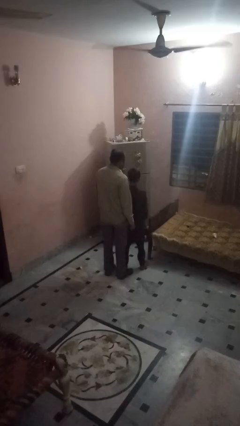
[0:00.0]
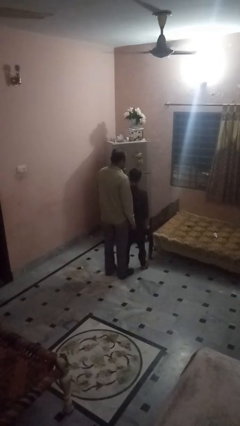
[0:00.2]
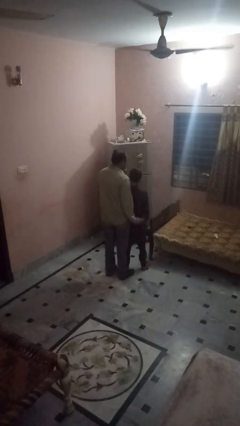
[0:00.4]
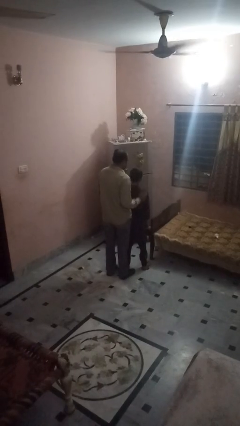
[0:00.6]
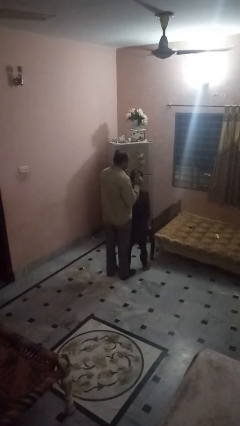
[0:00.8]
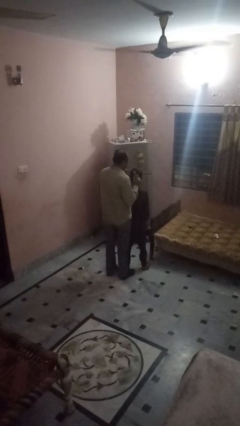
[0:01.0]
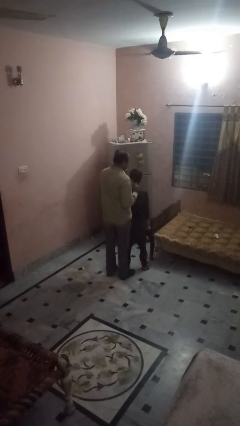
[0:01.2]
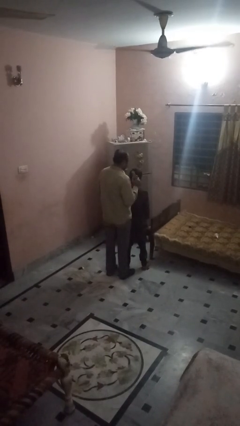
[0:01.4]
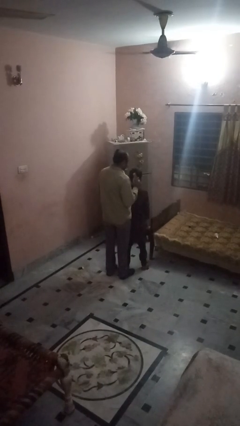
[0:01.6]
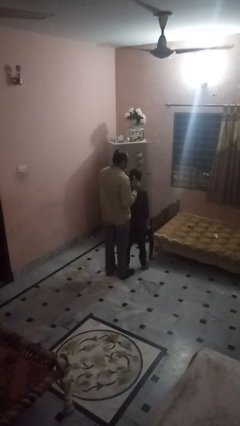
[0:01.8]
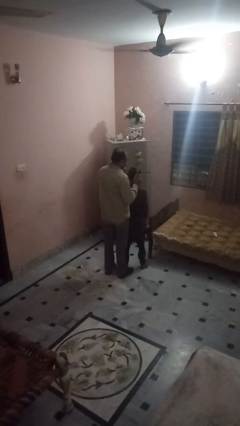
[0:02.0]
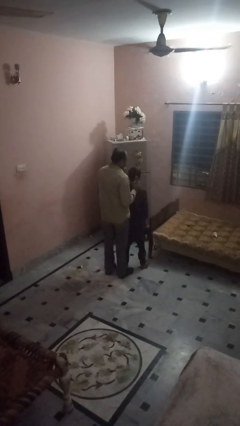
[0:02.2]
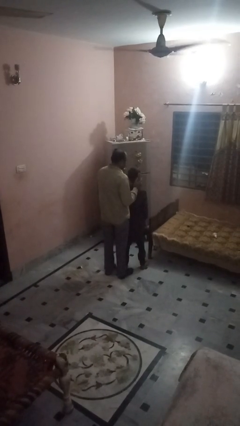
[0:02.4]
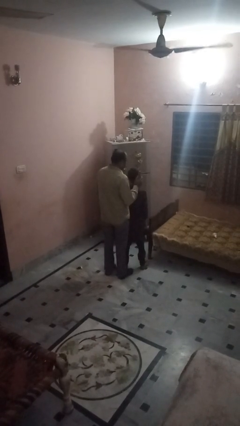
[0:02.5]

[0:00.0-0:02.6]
person brushes hair of person

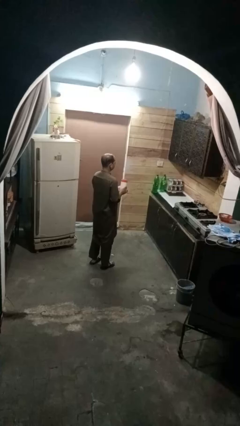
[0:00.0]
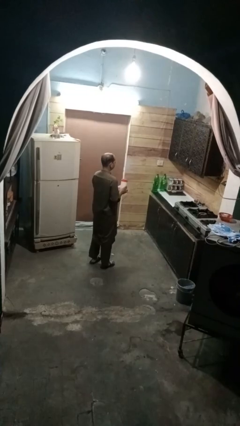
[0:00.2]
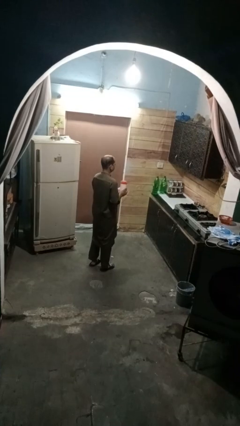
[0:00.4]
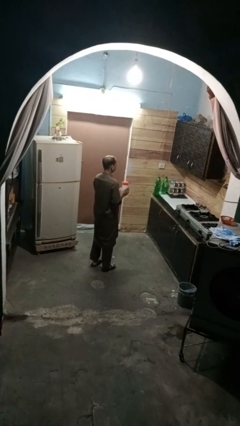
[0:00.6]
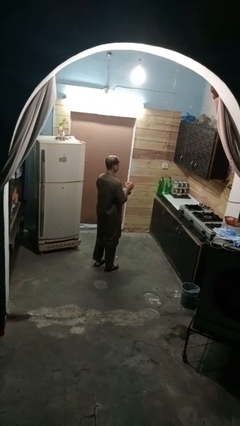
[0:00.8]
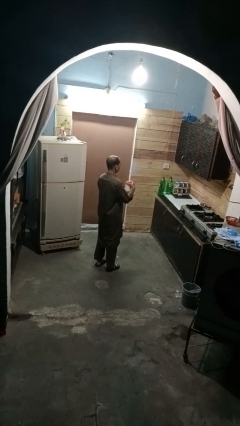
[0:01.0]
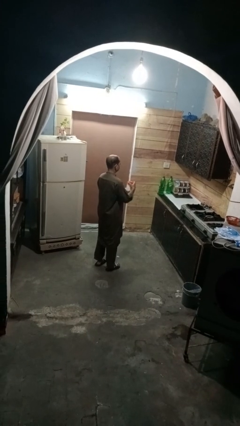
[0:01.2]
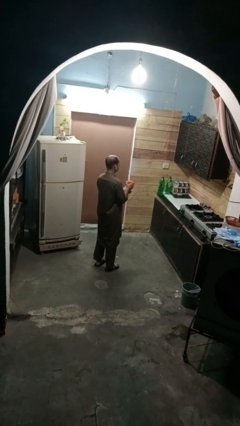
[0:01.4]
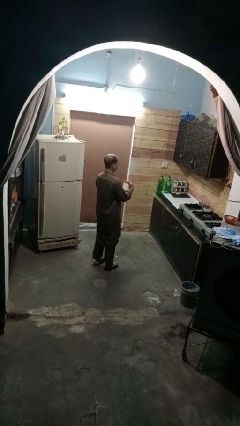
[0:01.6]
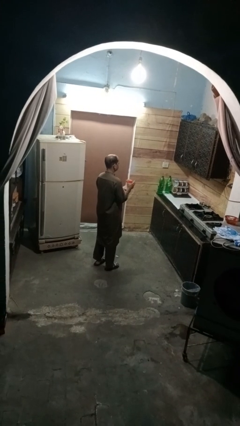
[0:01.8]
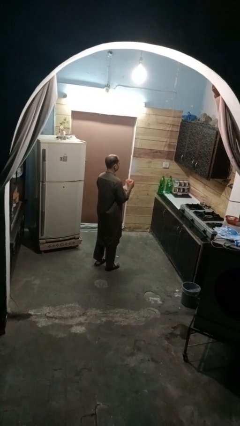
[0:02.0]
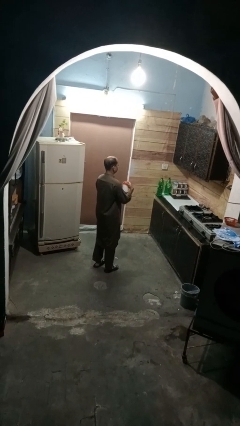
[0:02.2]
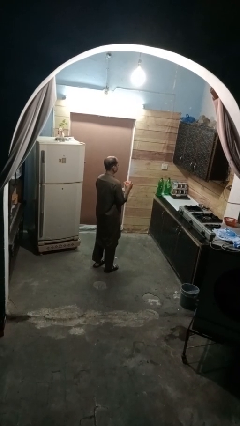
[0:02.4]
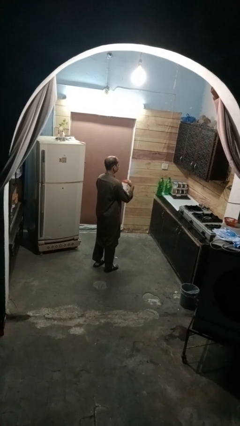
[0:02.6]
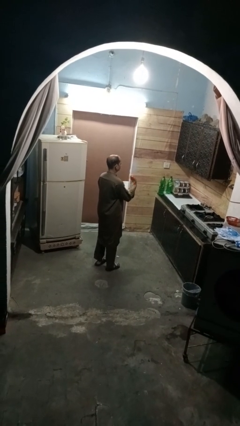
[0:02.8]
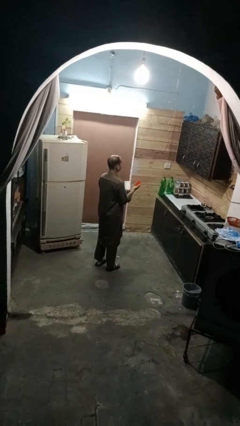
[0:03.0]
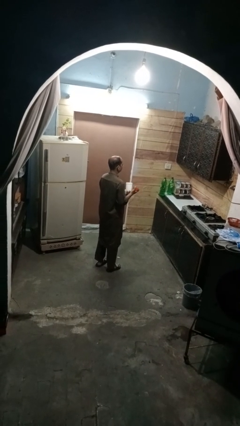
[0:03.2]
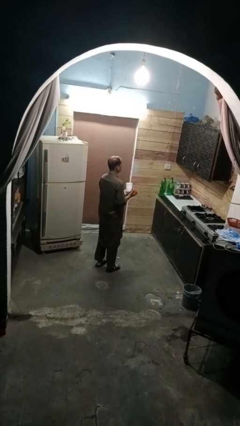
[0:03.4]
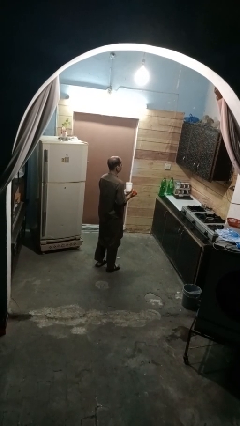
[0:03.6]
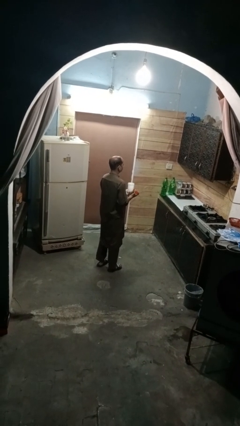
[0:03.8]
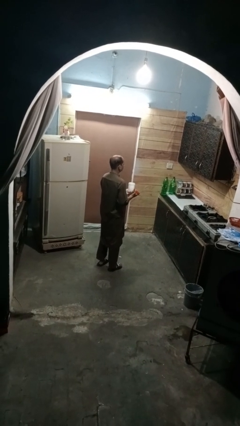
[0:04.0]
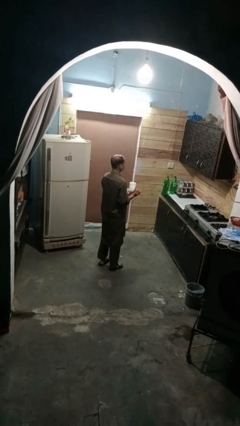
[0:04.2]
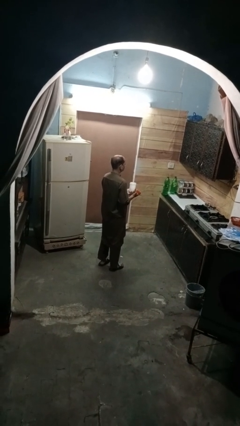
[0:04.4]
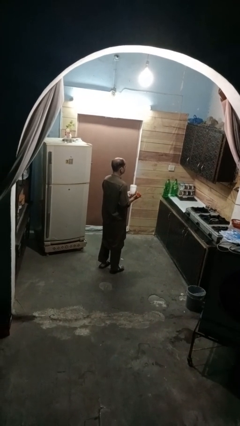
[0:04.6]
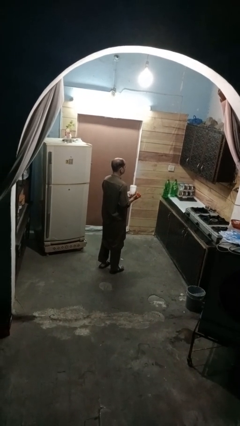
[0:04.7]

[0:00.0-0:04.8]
person opens jar

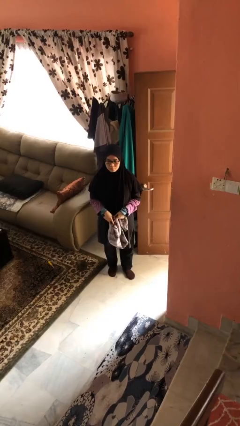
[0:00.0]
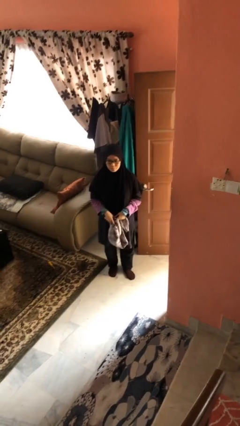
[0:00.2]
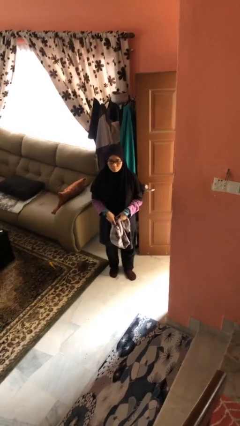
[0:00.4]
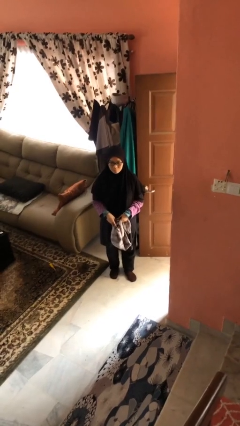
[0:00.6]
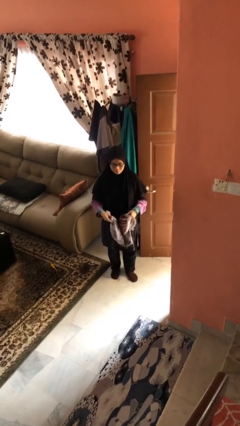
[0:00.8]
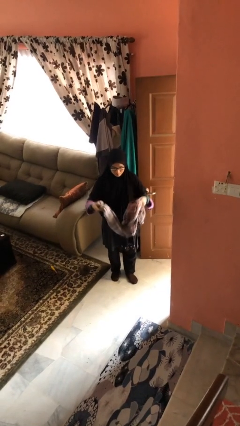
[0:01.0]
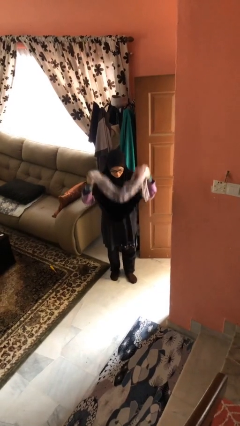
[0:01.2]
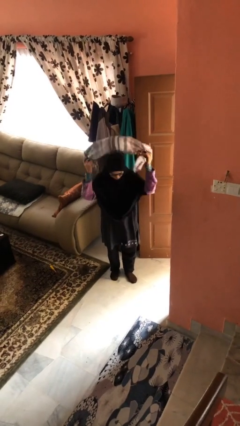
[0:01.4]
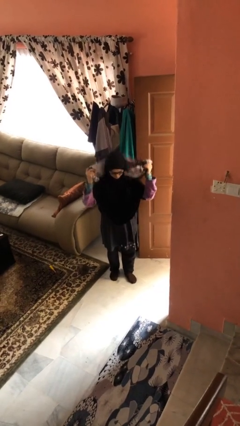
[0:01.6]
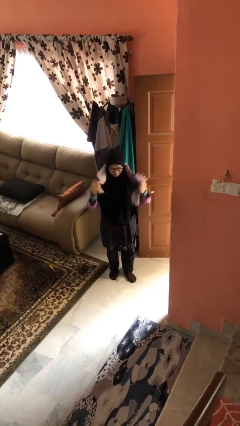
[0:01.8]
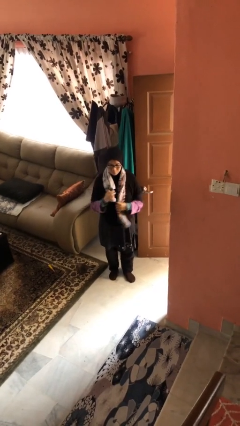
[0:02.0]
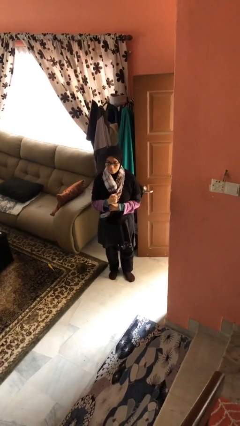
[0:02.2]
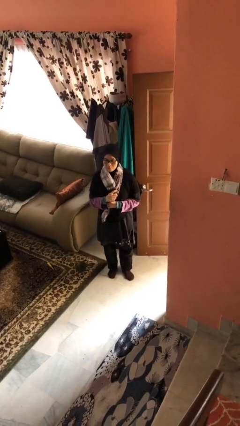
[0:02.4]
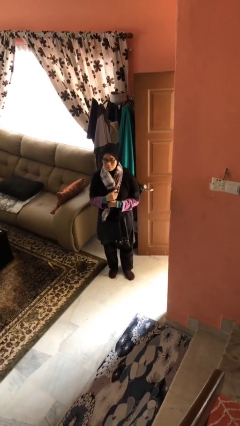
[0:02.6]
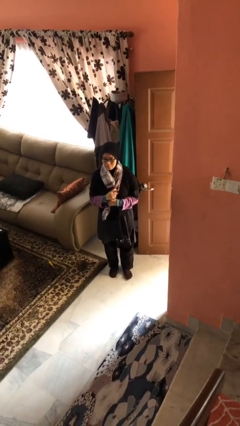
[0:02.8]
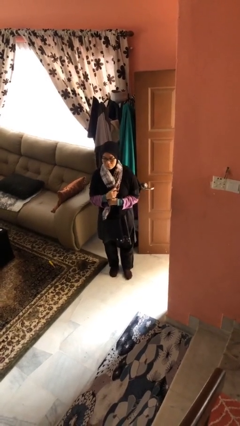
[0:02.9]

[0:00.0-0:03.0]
person puts on scarf

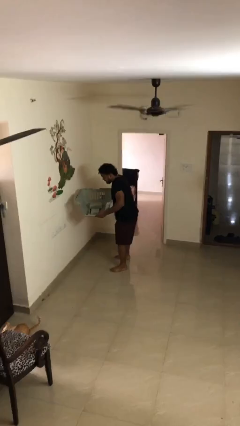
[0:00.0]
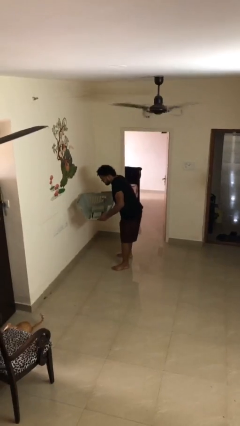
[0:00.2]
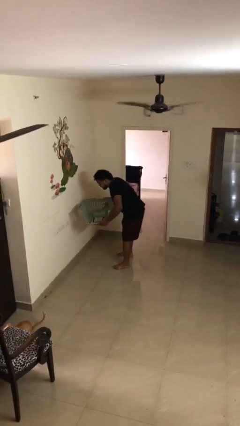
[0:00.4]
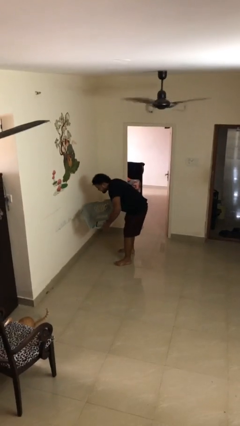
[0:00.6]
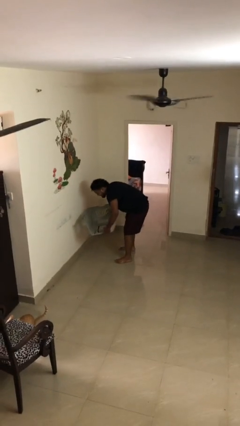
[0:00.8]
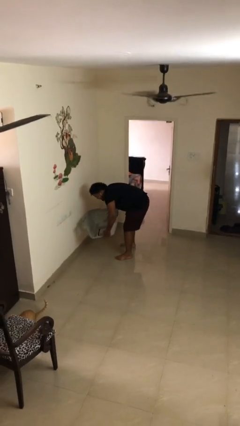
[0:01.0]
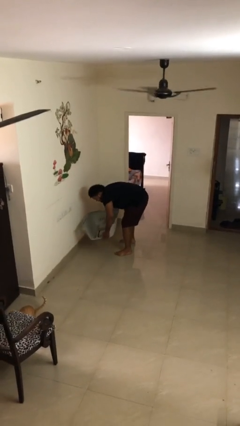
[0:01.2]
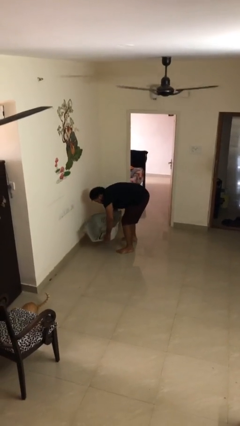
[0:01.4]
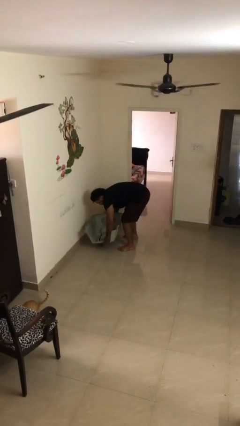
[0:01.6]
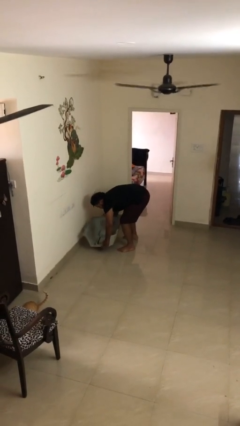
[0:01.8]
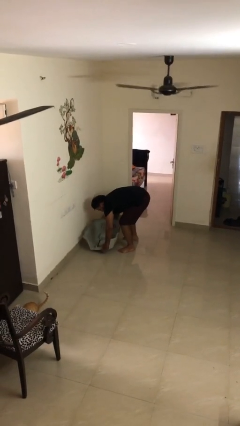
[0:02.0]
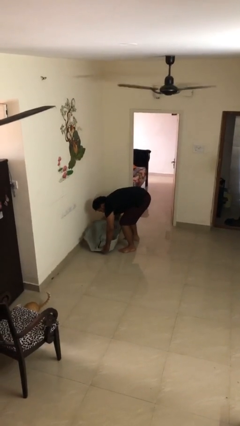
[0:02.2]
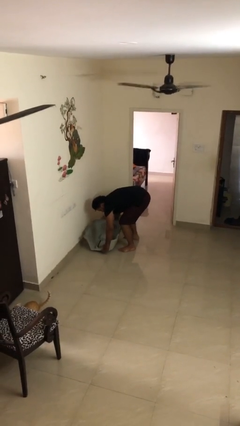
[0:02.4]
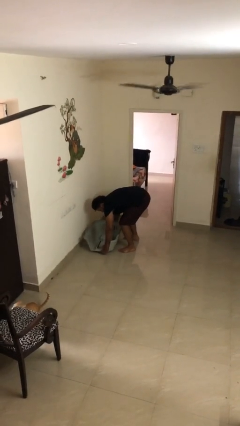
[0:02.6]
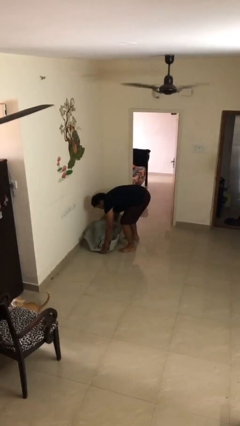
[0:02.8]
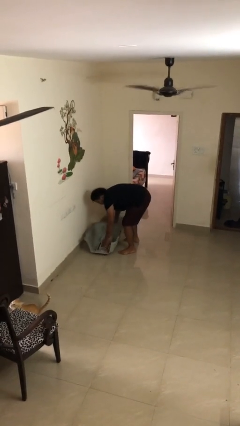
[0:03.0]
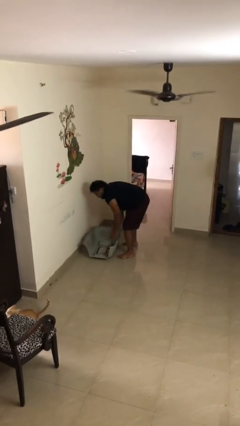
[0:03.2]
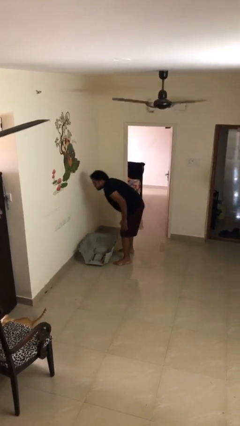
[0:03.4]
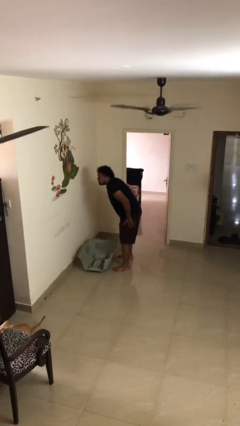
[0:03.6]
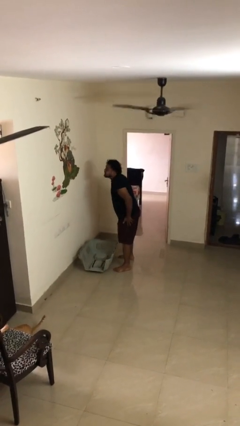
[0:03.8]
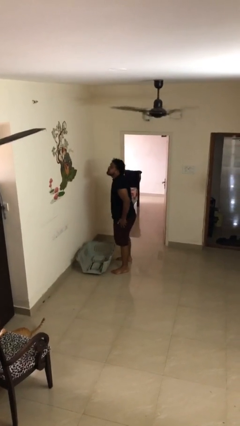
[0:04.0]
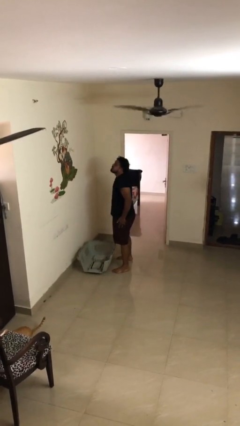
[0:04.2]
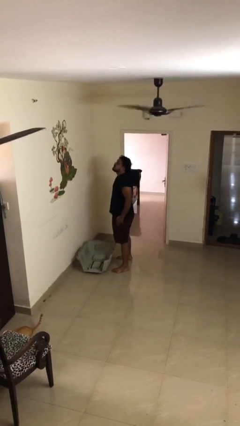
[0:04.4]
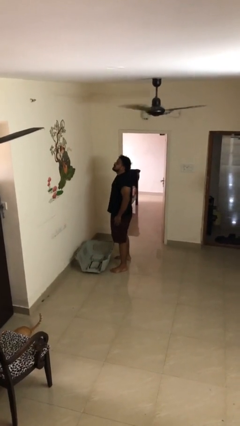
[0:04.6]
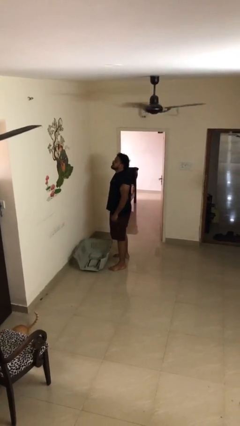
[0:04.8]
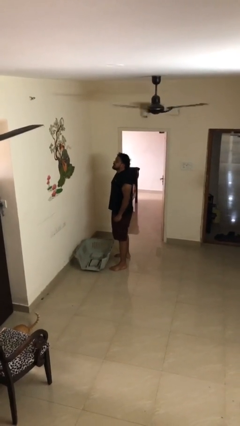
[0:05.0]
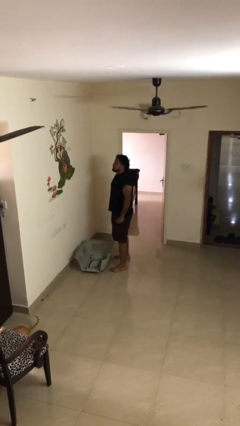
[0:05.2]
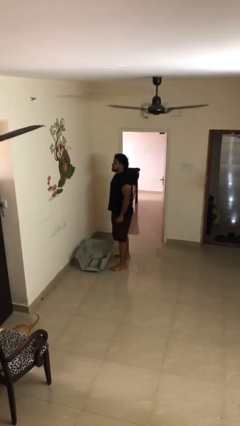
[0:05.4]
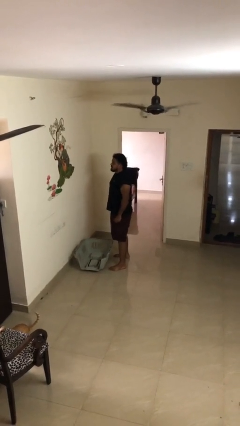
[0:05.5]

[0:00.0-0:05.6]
person puts down object on floor

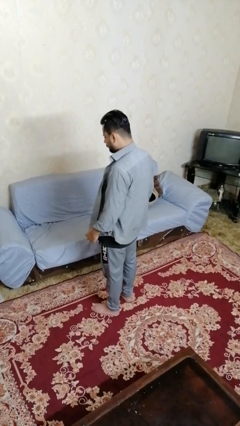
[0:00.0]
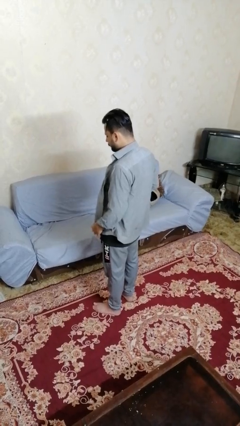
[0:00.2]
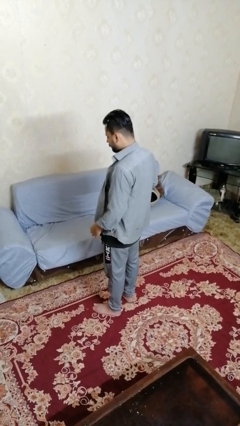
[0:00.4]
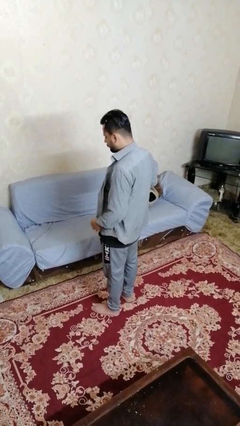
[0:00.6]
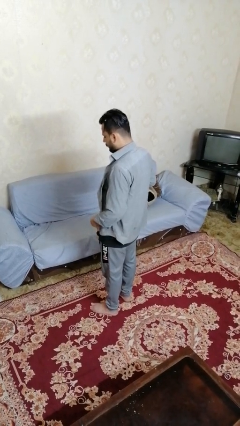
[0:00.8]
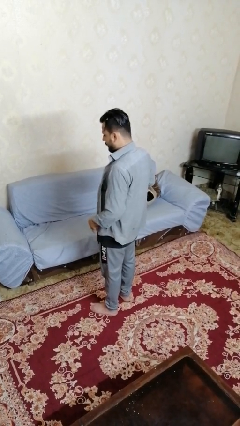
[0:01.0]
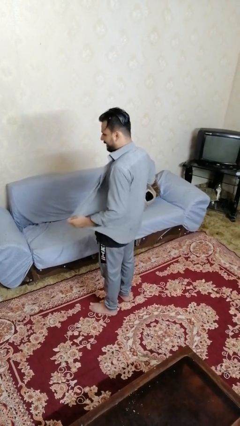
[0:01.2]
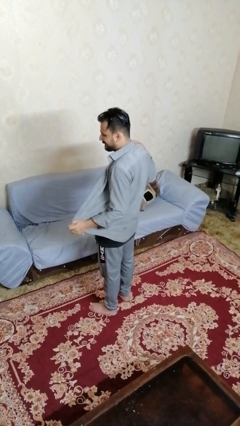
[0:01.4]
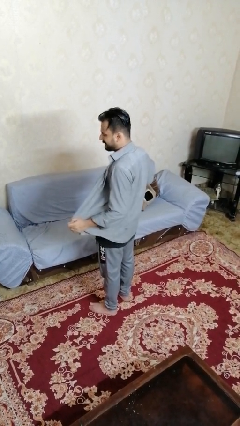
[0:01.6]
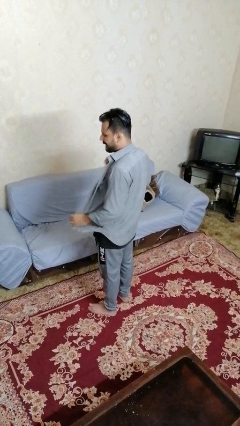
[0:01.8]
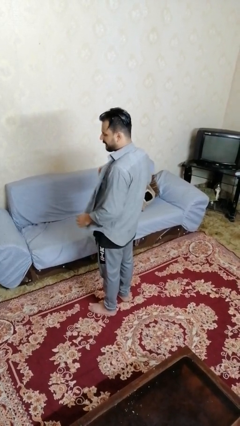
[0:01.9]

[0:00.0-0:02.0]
person buttons shirt
